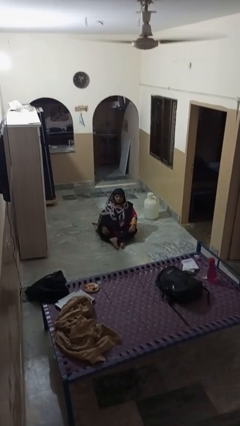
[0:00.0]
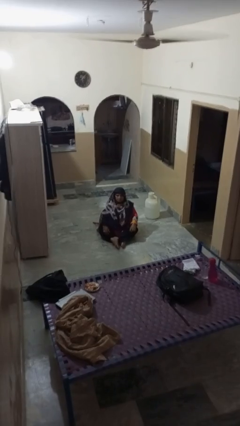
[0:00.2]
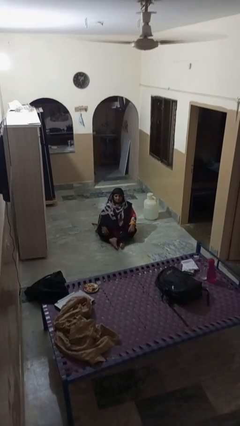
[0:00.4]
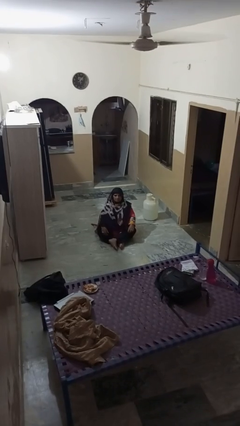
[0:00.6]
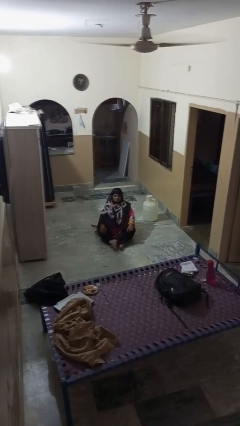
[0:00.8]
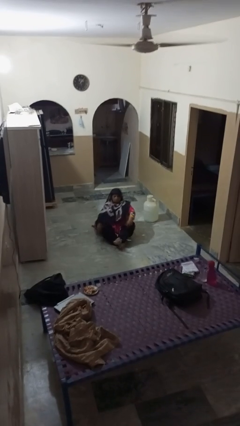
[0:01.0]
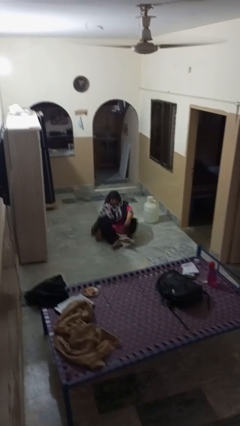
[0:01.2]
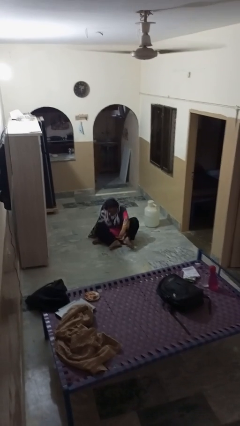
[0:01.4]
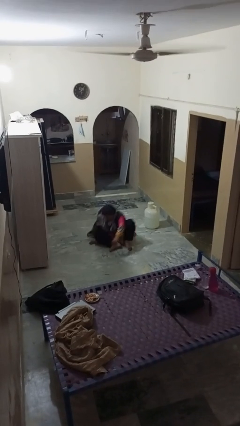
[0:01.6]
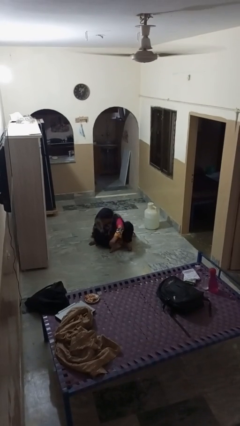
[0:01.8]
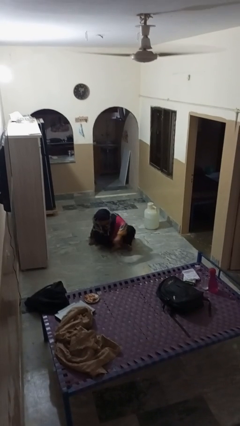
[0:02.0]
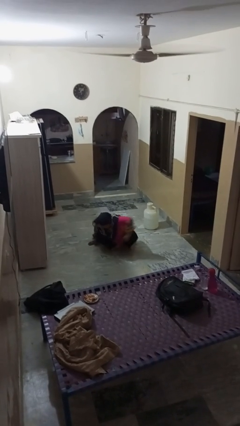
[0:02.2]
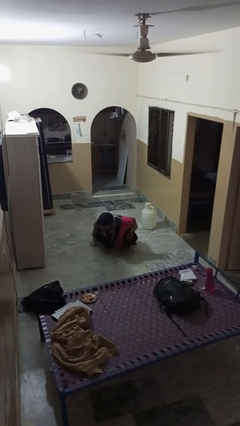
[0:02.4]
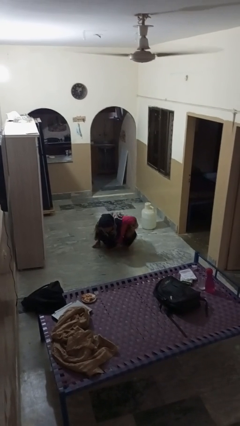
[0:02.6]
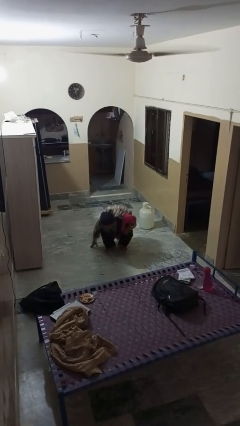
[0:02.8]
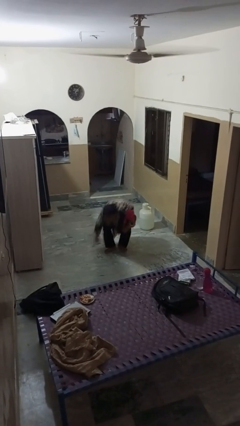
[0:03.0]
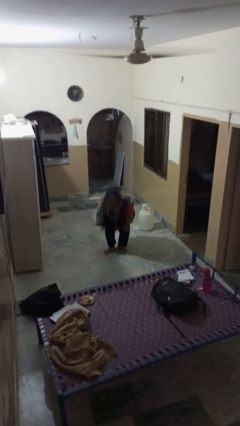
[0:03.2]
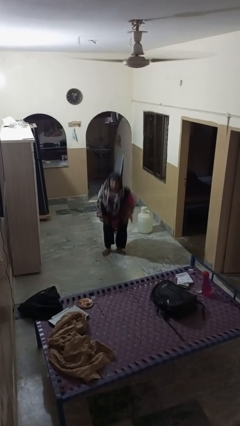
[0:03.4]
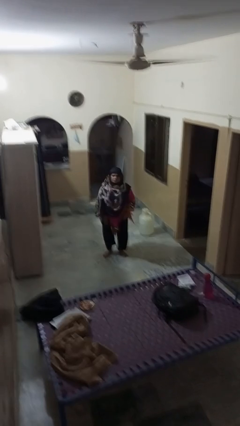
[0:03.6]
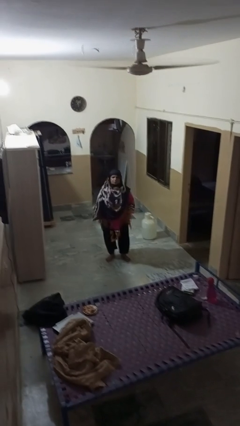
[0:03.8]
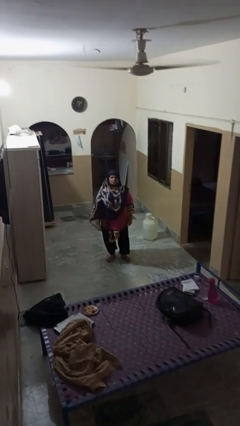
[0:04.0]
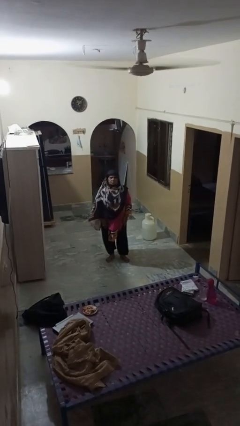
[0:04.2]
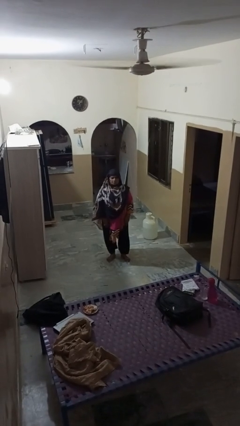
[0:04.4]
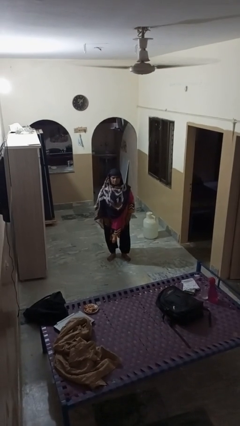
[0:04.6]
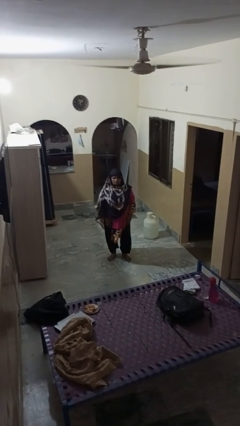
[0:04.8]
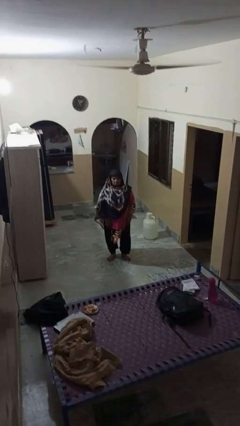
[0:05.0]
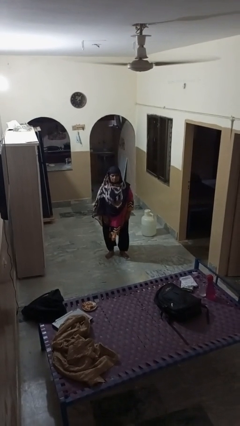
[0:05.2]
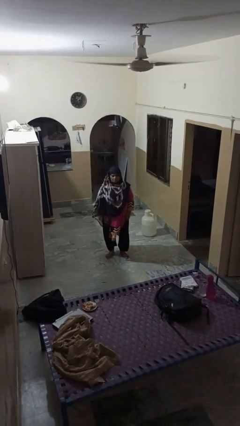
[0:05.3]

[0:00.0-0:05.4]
person stands up from floor

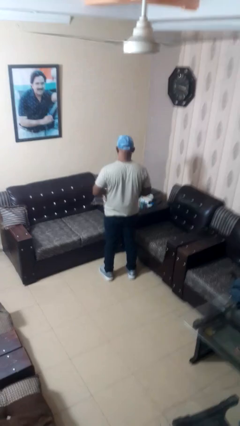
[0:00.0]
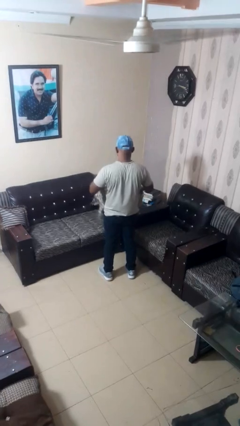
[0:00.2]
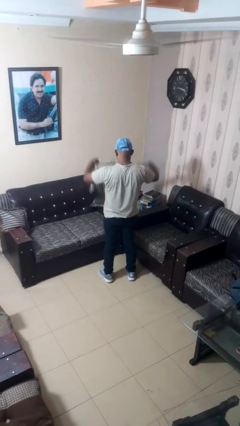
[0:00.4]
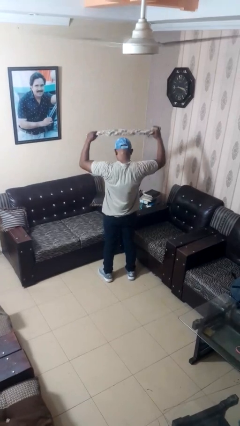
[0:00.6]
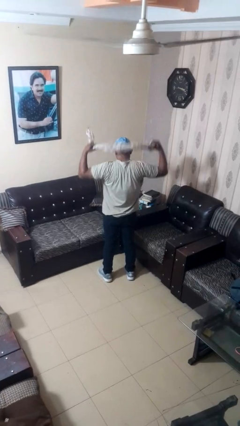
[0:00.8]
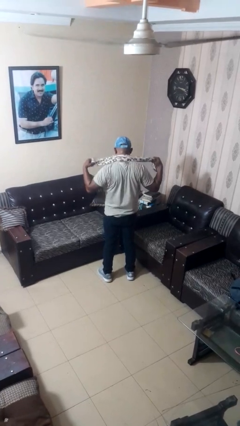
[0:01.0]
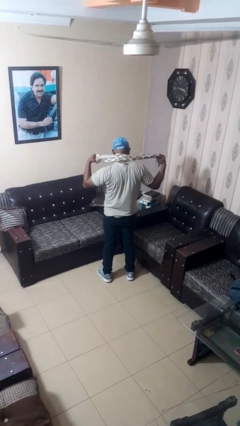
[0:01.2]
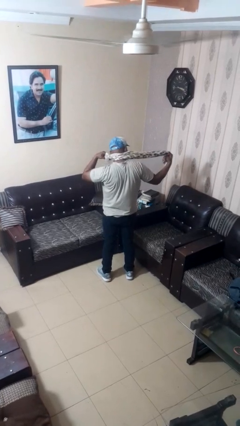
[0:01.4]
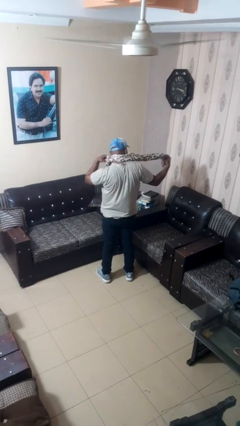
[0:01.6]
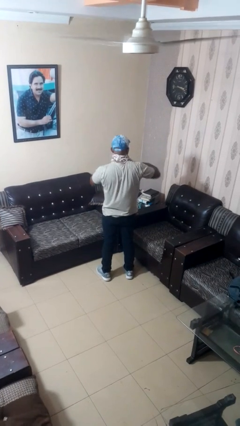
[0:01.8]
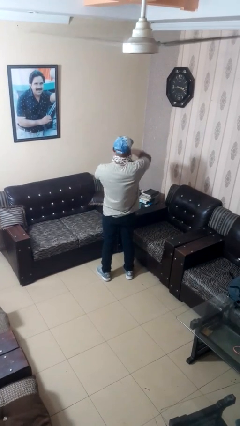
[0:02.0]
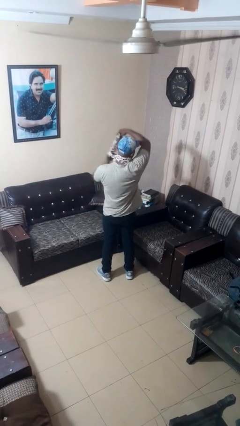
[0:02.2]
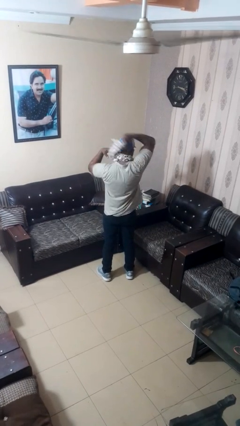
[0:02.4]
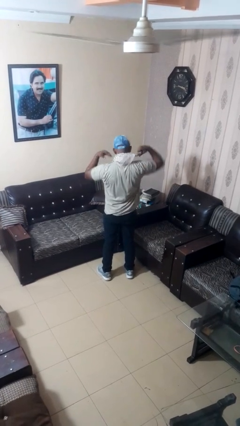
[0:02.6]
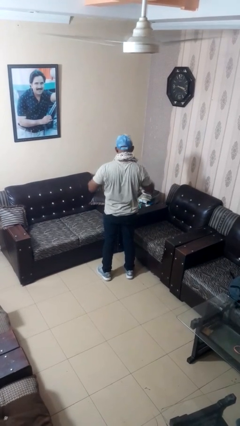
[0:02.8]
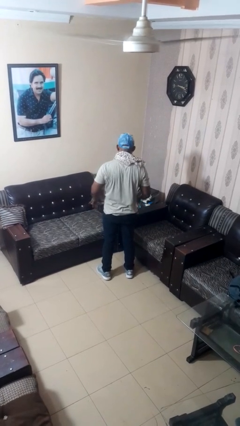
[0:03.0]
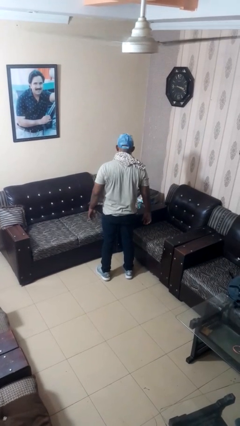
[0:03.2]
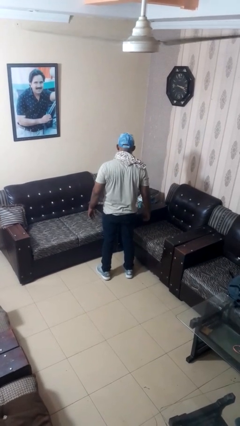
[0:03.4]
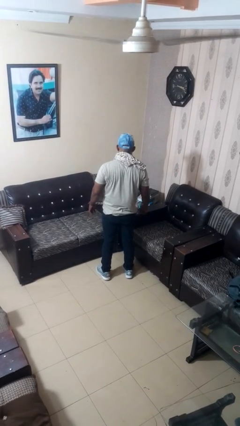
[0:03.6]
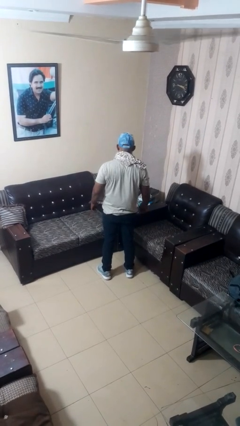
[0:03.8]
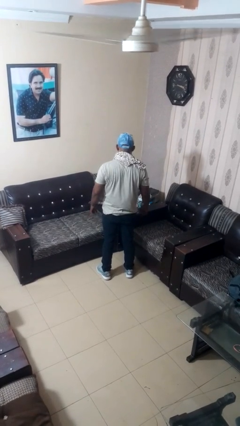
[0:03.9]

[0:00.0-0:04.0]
person puts on scarf

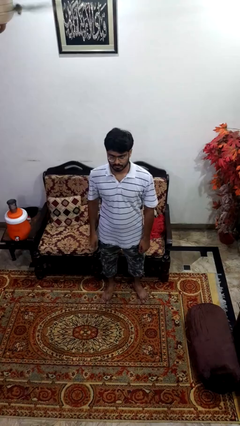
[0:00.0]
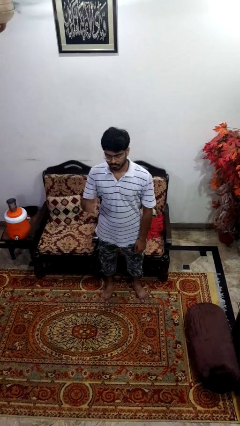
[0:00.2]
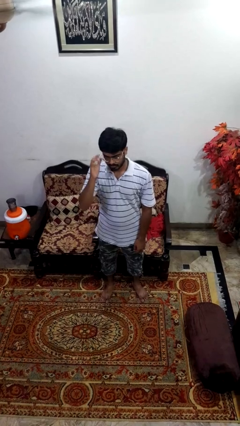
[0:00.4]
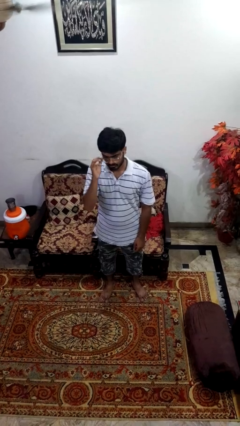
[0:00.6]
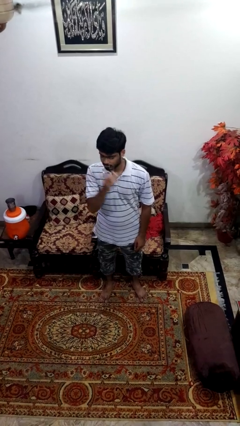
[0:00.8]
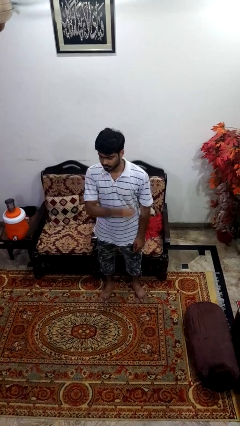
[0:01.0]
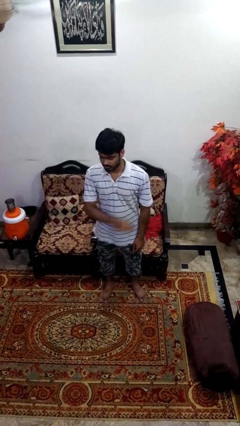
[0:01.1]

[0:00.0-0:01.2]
person takes off glasses

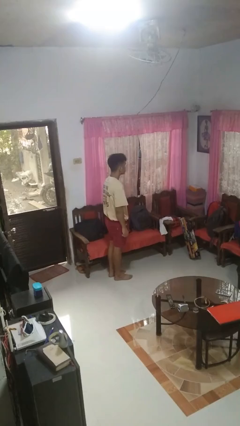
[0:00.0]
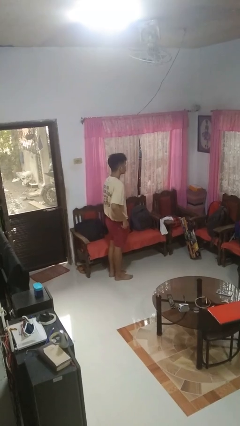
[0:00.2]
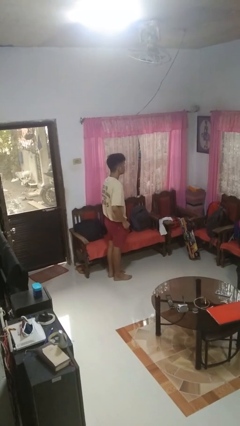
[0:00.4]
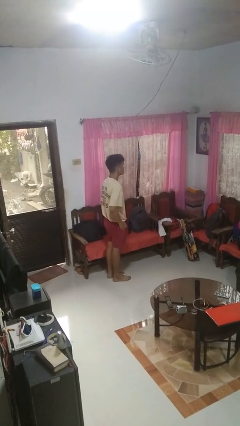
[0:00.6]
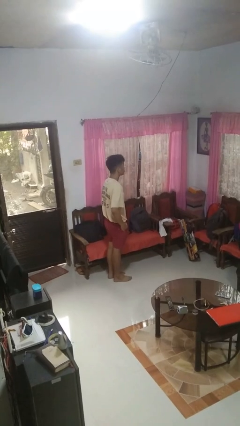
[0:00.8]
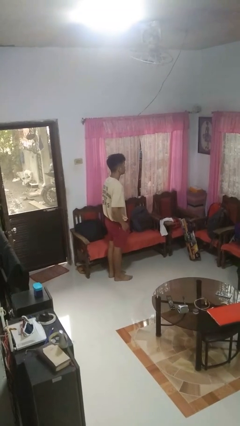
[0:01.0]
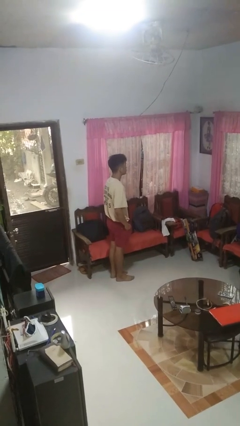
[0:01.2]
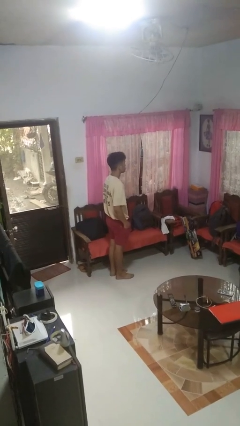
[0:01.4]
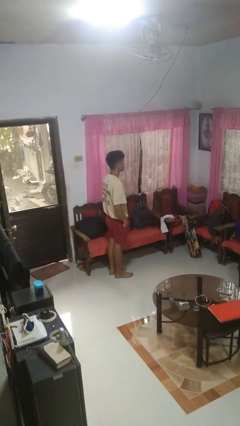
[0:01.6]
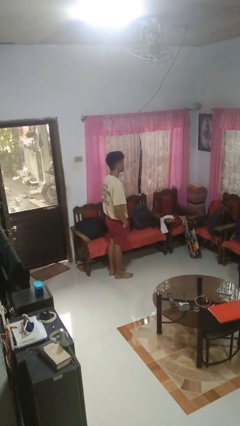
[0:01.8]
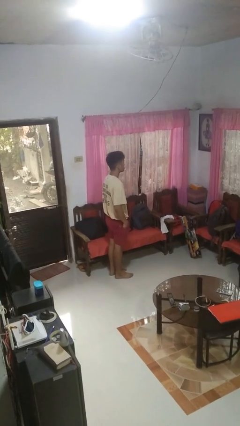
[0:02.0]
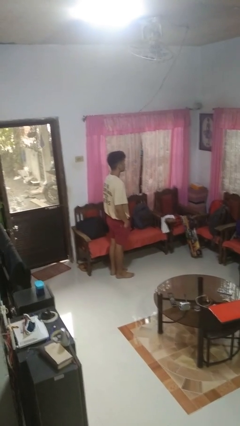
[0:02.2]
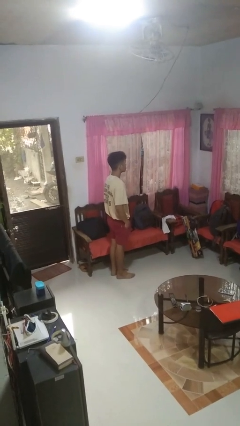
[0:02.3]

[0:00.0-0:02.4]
person puts hands in back pockets

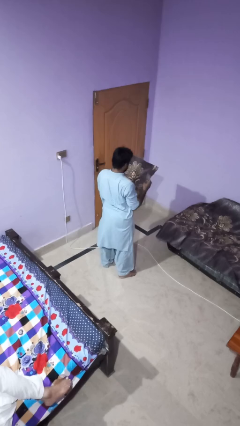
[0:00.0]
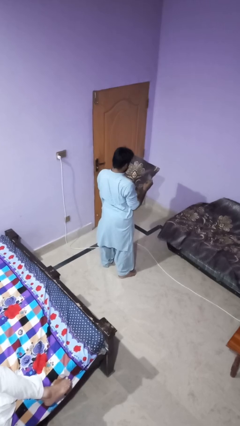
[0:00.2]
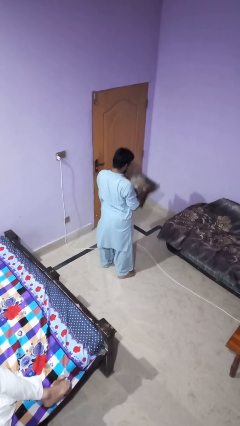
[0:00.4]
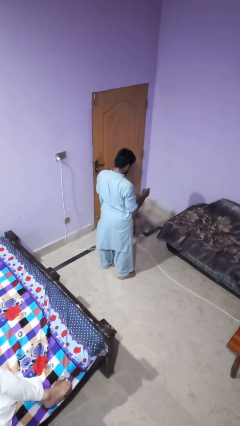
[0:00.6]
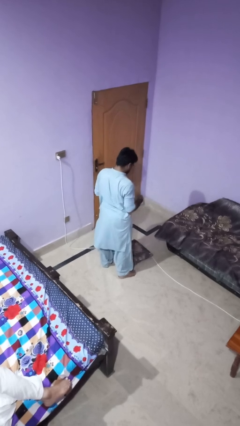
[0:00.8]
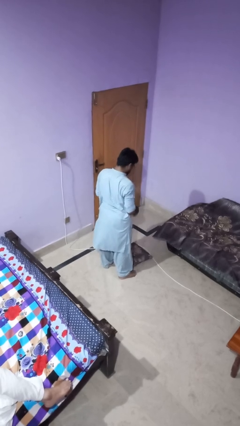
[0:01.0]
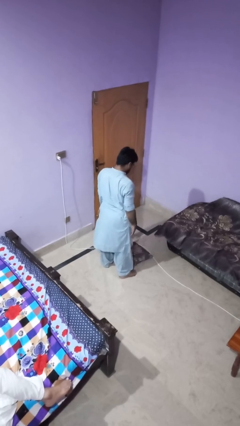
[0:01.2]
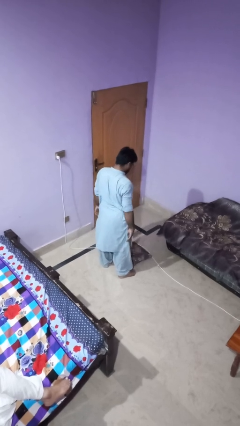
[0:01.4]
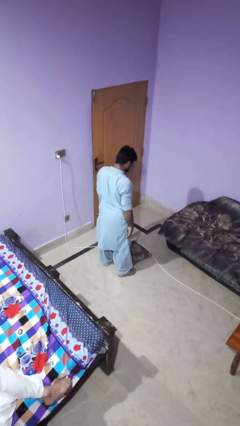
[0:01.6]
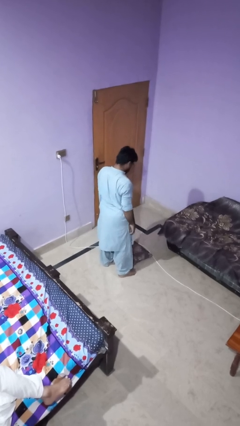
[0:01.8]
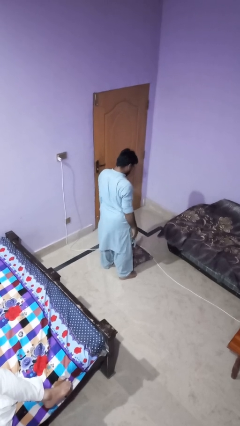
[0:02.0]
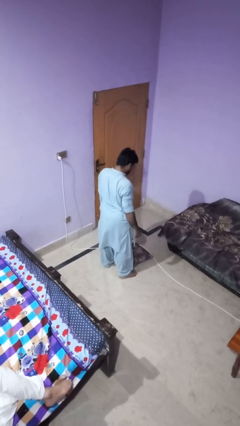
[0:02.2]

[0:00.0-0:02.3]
person drops object

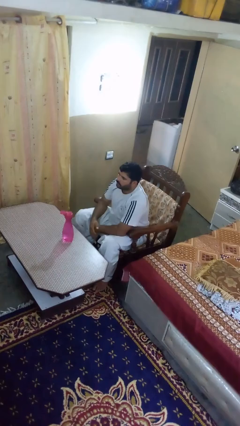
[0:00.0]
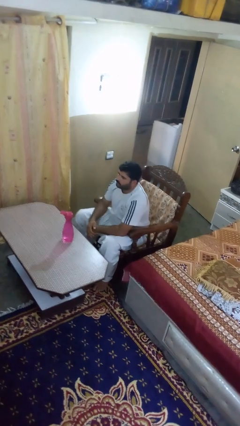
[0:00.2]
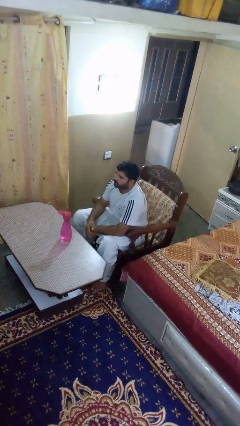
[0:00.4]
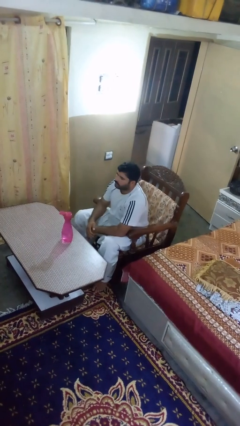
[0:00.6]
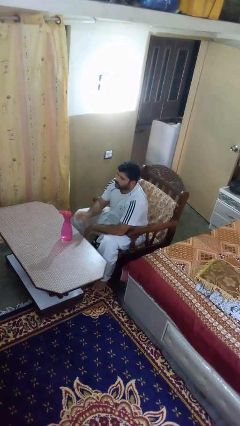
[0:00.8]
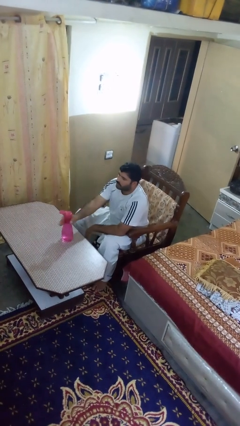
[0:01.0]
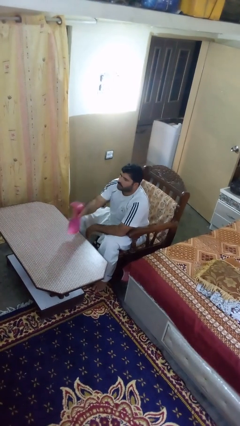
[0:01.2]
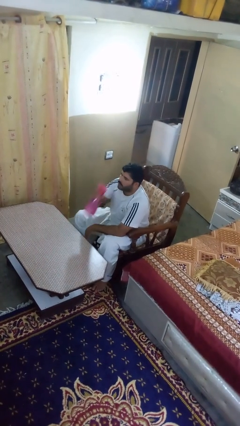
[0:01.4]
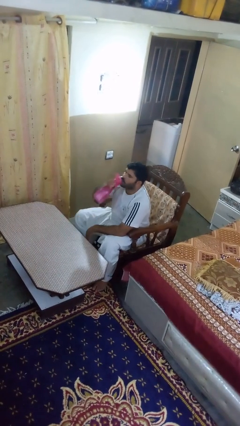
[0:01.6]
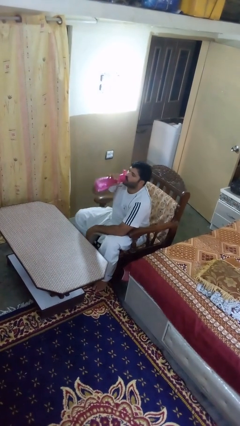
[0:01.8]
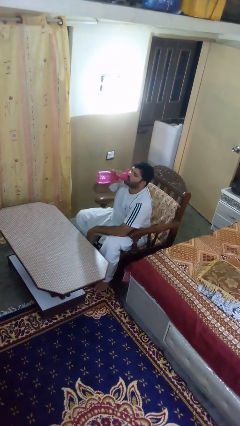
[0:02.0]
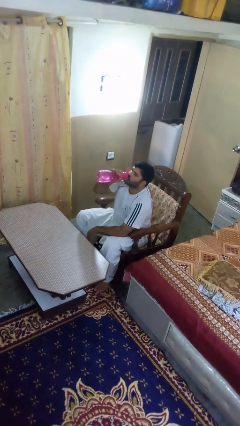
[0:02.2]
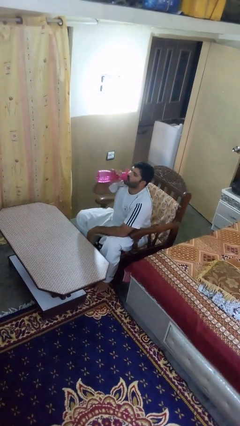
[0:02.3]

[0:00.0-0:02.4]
person drinks from bottle
